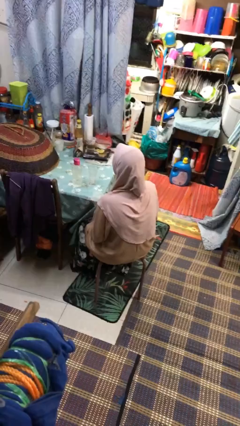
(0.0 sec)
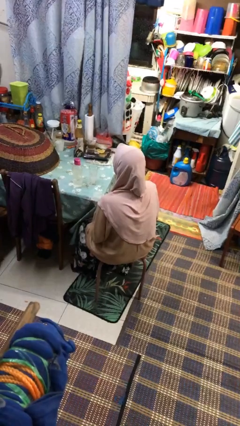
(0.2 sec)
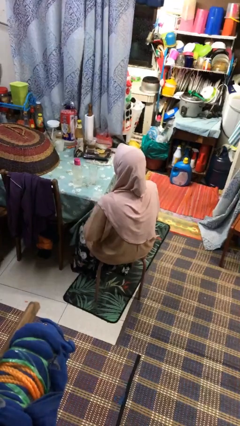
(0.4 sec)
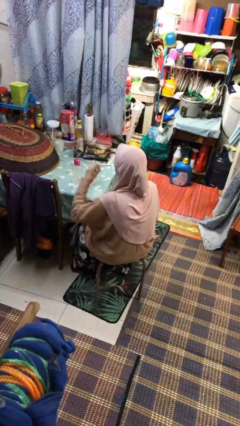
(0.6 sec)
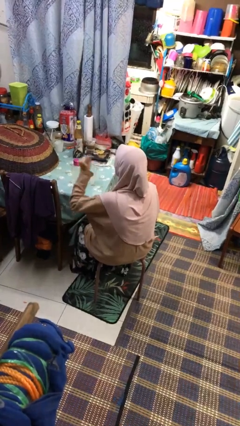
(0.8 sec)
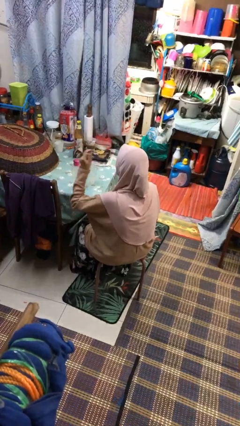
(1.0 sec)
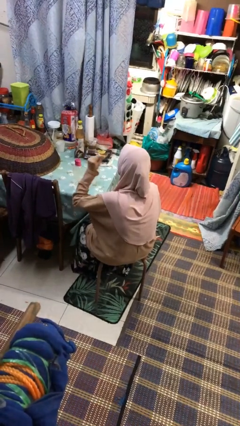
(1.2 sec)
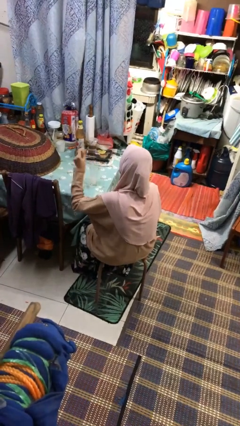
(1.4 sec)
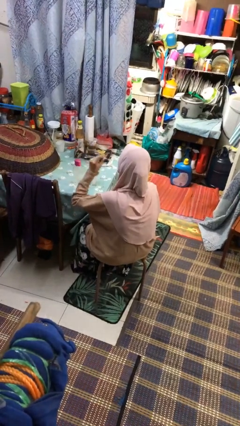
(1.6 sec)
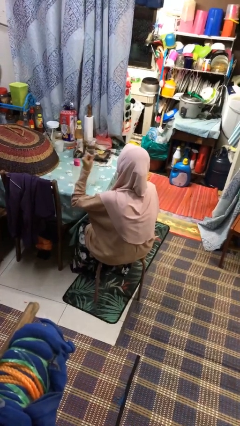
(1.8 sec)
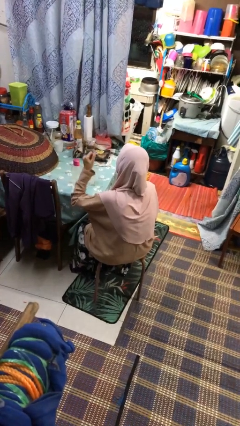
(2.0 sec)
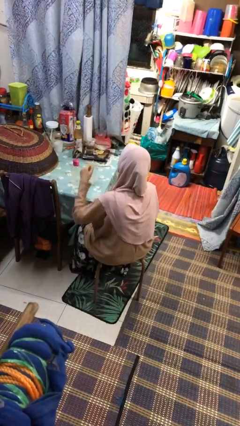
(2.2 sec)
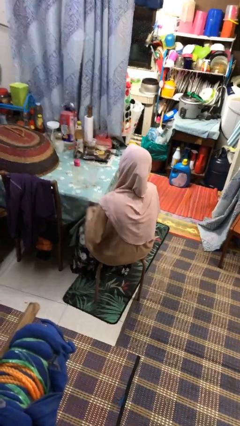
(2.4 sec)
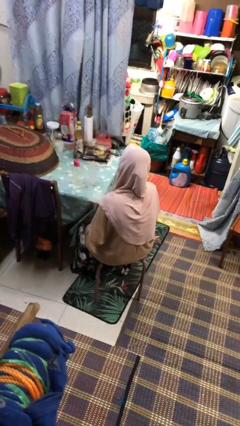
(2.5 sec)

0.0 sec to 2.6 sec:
person snaps fingers

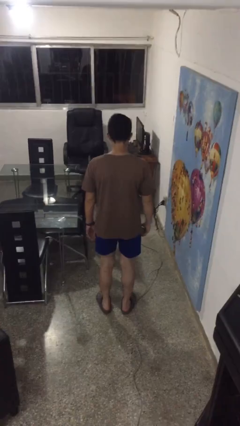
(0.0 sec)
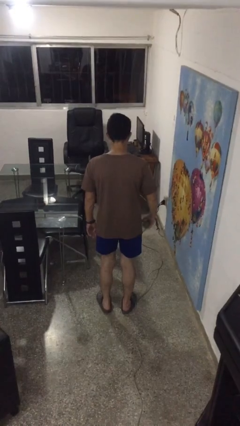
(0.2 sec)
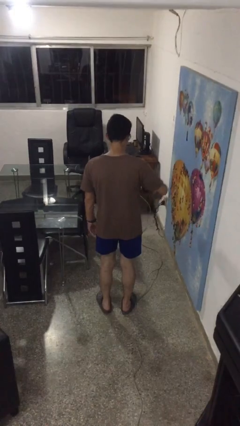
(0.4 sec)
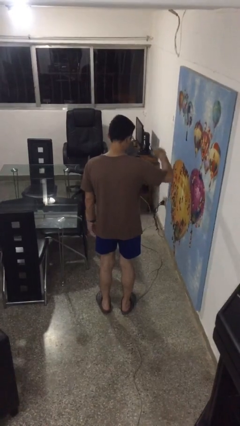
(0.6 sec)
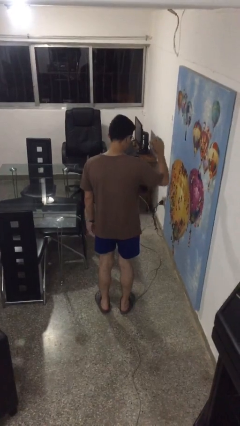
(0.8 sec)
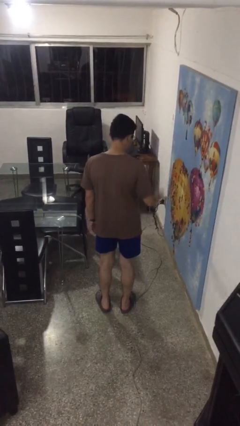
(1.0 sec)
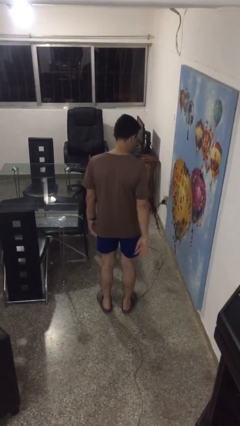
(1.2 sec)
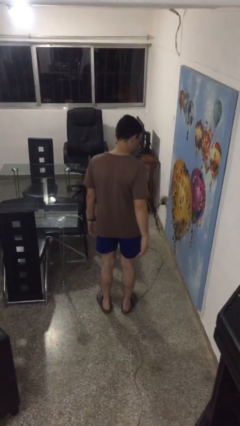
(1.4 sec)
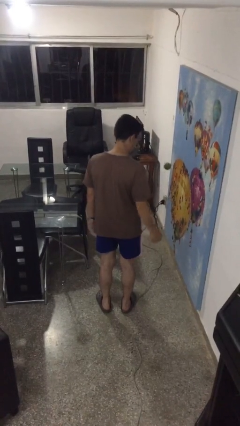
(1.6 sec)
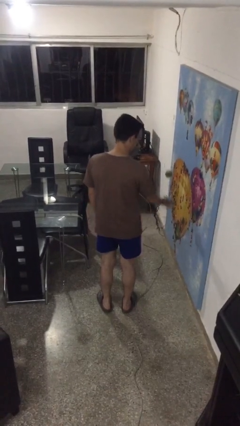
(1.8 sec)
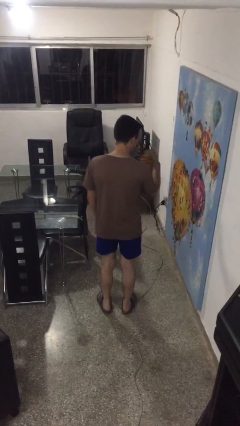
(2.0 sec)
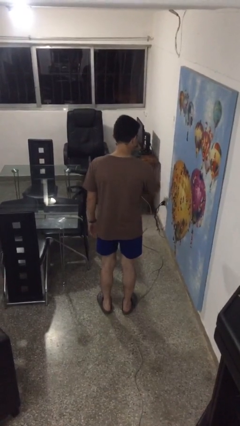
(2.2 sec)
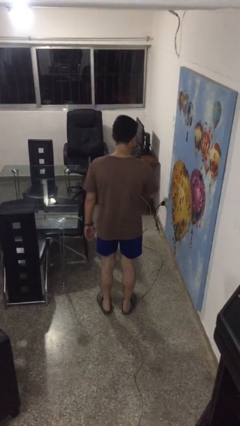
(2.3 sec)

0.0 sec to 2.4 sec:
person bounces ball on floor

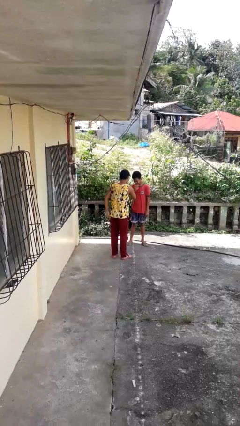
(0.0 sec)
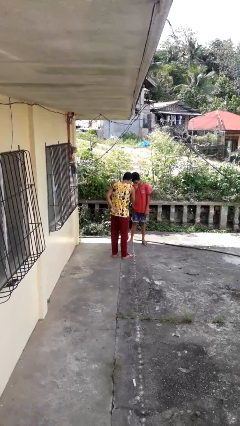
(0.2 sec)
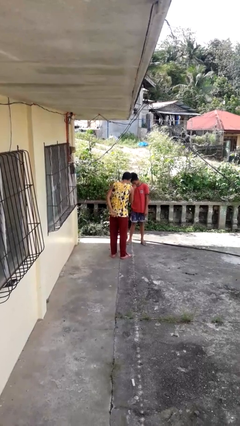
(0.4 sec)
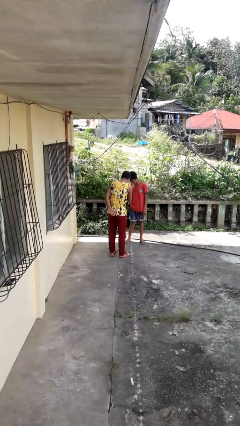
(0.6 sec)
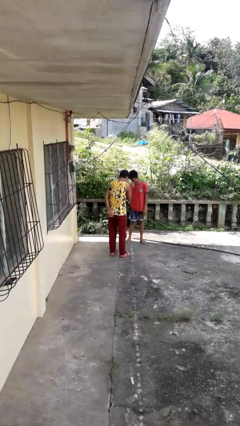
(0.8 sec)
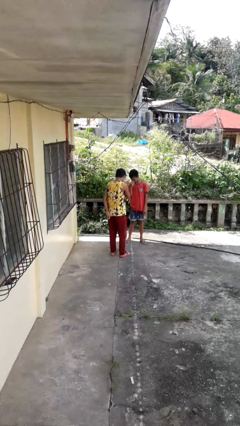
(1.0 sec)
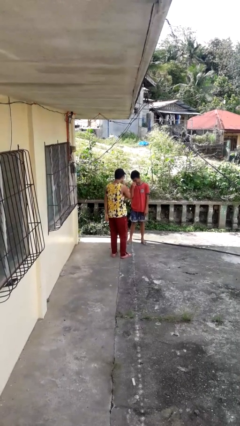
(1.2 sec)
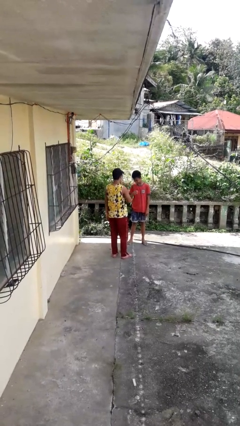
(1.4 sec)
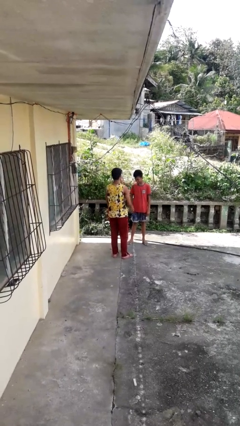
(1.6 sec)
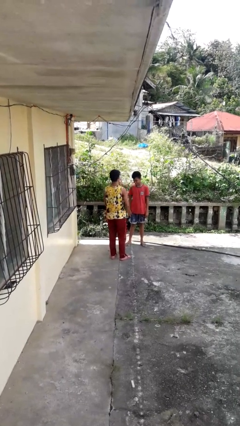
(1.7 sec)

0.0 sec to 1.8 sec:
person laughs with person

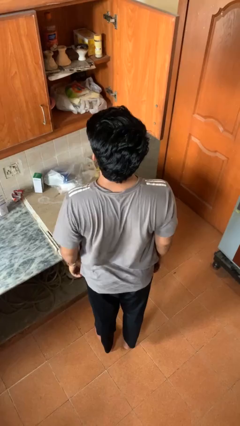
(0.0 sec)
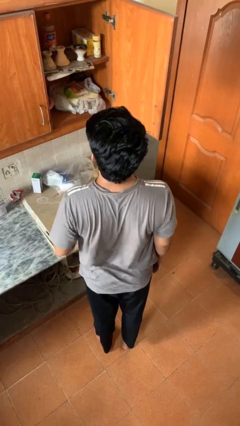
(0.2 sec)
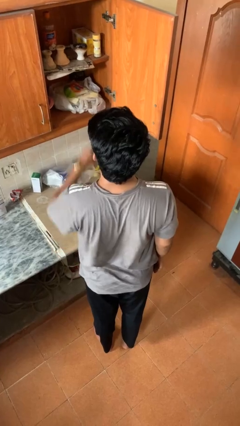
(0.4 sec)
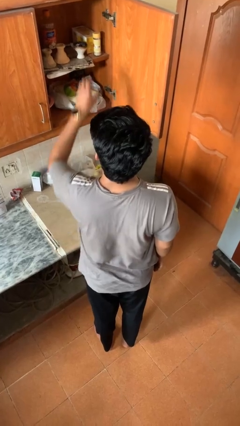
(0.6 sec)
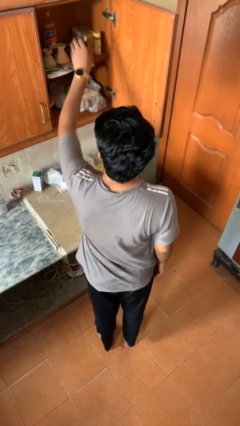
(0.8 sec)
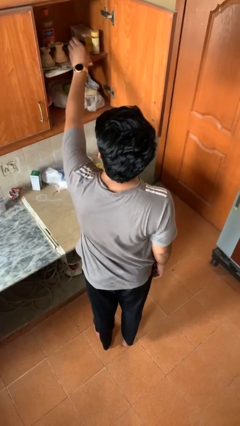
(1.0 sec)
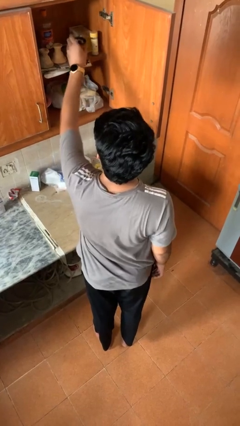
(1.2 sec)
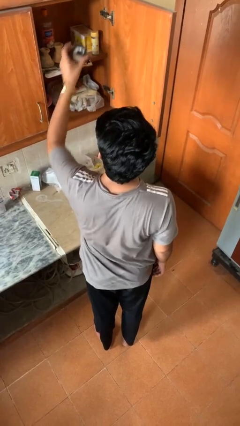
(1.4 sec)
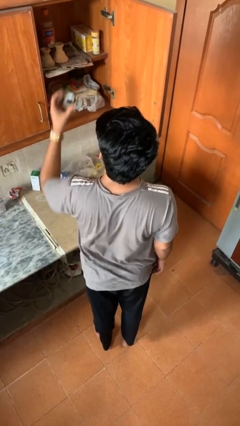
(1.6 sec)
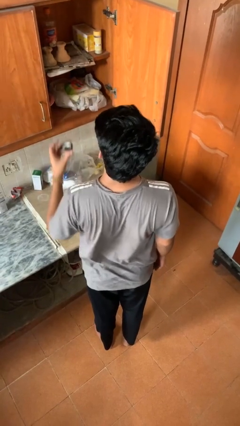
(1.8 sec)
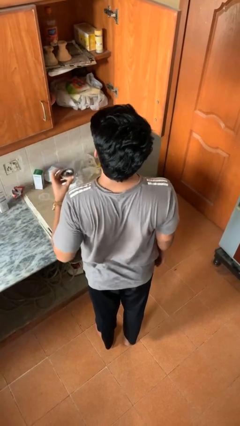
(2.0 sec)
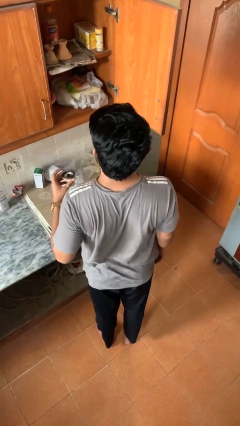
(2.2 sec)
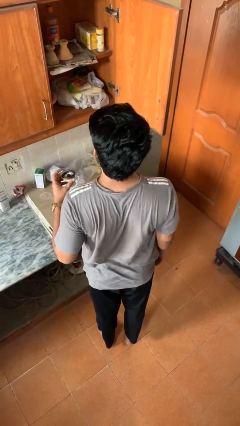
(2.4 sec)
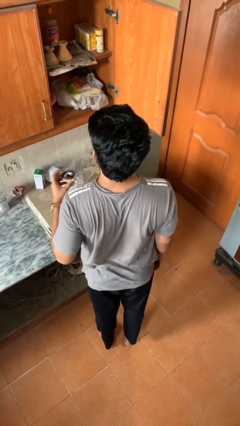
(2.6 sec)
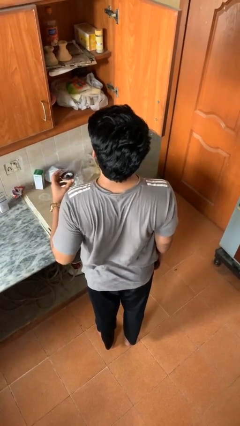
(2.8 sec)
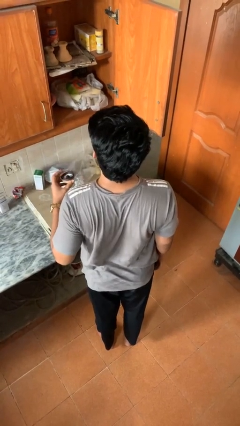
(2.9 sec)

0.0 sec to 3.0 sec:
person takes object from cabinet

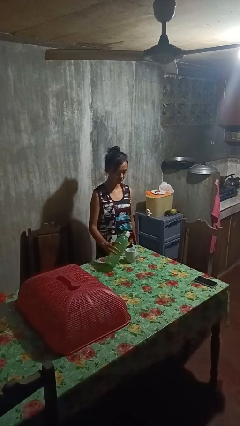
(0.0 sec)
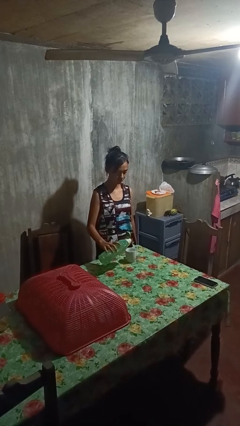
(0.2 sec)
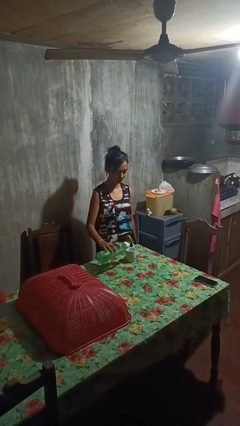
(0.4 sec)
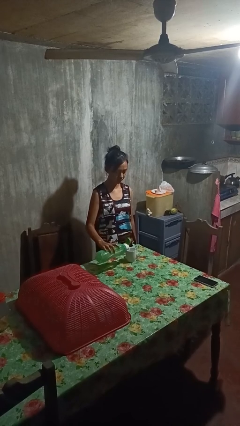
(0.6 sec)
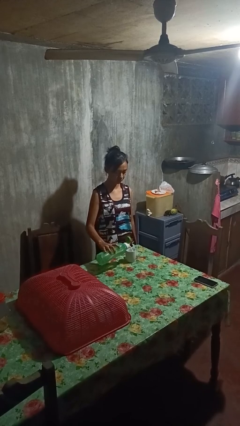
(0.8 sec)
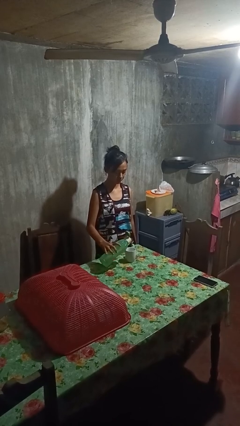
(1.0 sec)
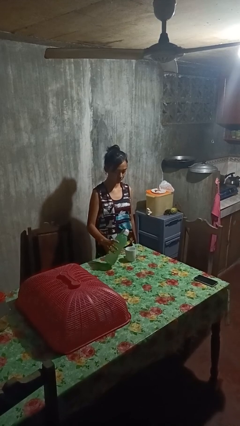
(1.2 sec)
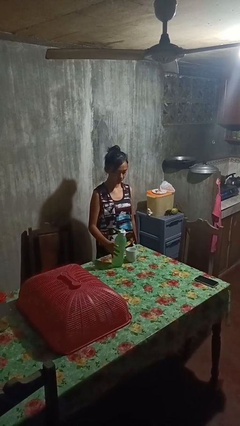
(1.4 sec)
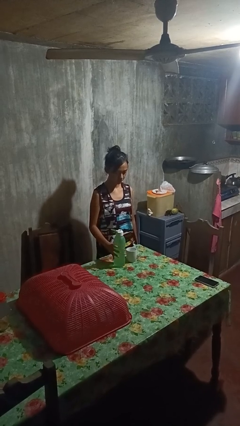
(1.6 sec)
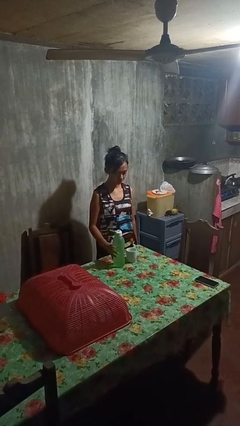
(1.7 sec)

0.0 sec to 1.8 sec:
person pours liquid into cup

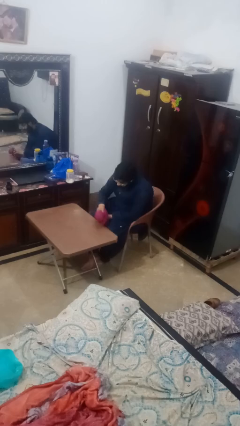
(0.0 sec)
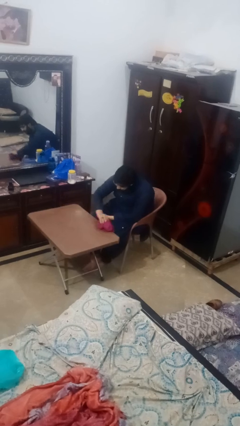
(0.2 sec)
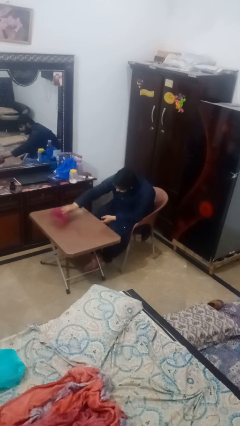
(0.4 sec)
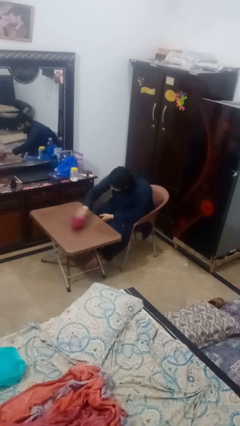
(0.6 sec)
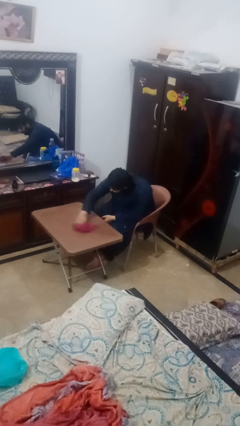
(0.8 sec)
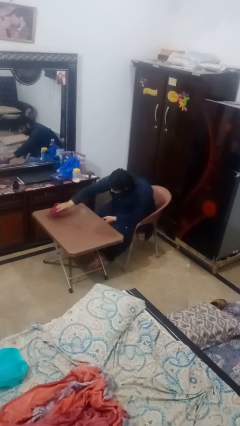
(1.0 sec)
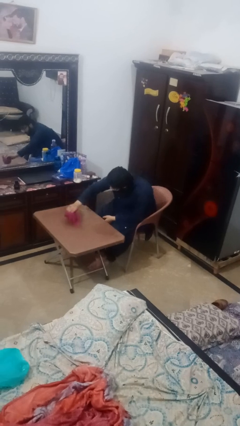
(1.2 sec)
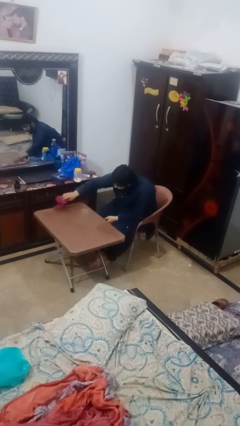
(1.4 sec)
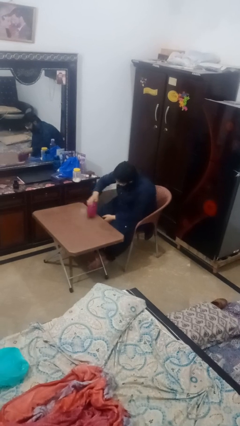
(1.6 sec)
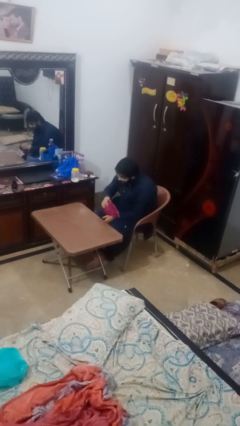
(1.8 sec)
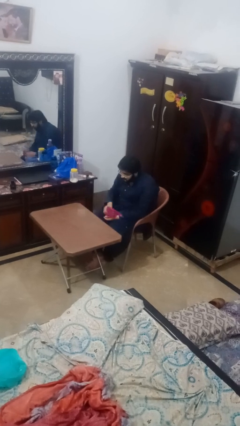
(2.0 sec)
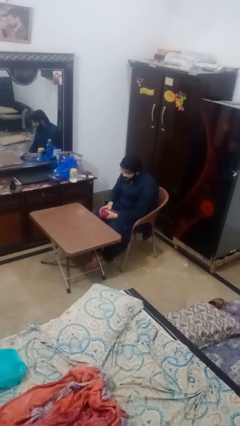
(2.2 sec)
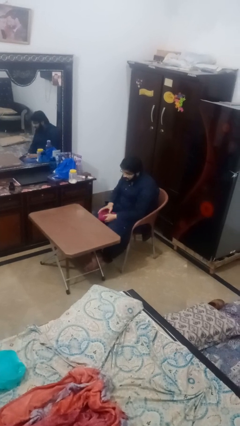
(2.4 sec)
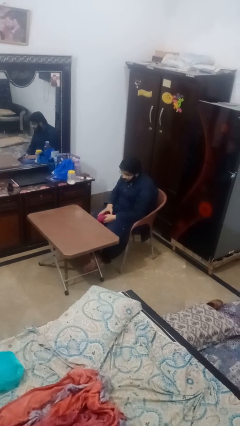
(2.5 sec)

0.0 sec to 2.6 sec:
person cleans table with rag

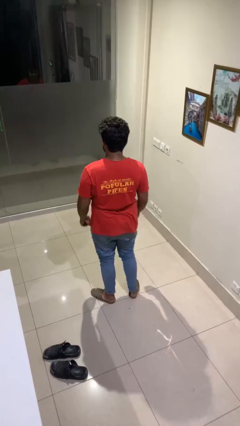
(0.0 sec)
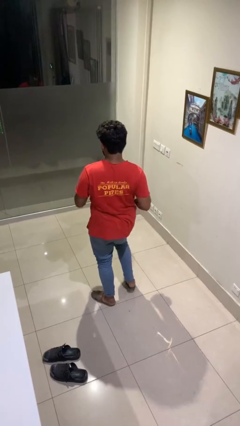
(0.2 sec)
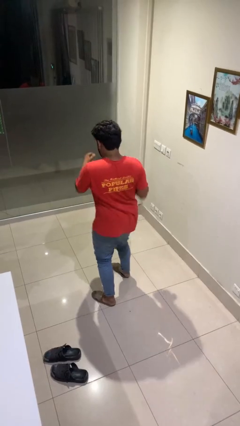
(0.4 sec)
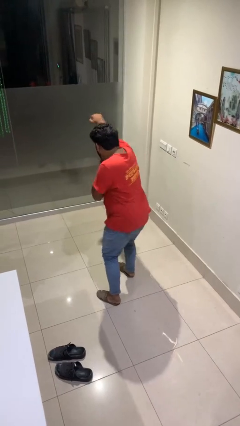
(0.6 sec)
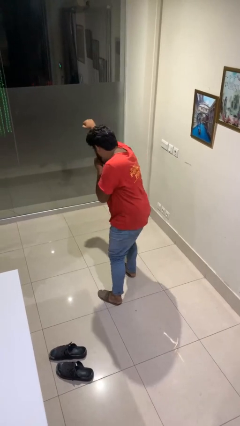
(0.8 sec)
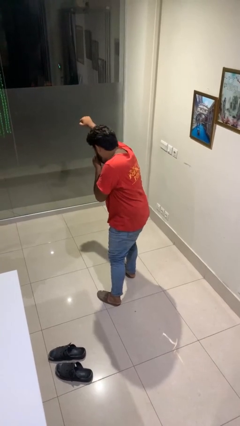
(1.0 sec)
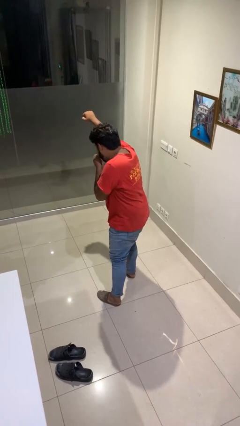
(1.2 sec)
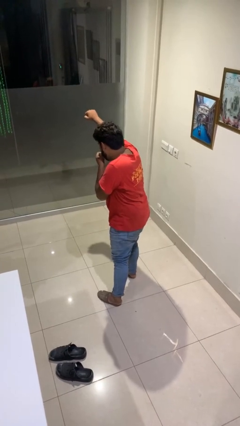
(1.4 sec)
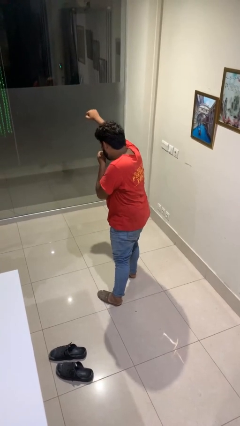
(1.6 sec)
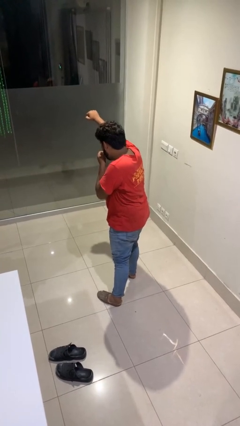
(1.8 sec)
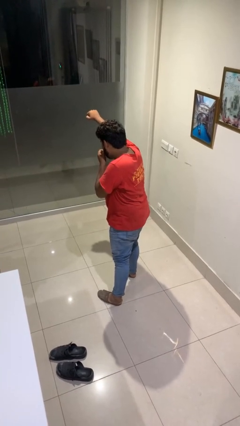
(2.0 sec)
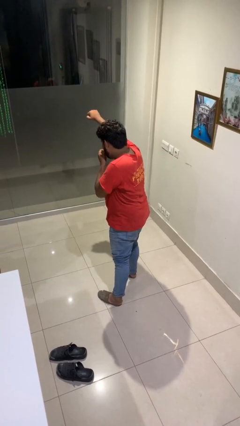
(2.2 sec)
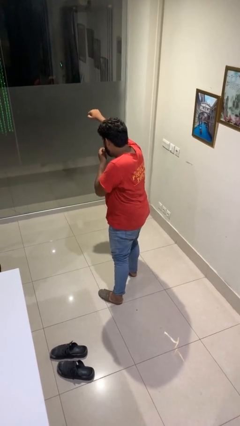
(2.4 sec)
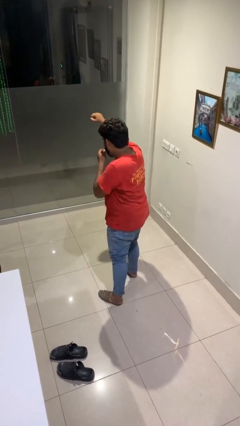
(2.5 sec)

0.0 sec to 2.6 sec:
person punches

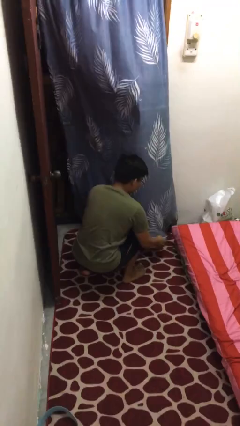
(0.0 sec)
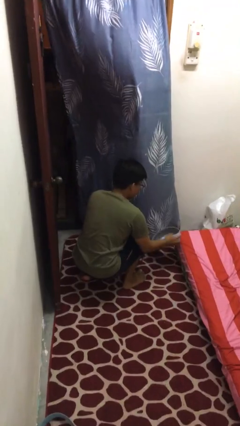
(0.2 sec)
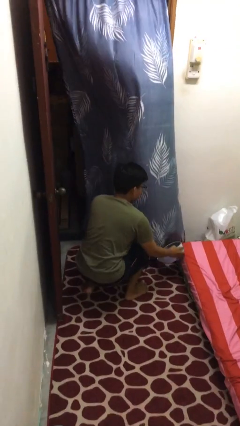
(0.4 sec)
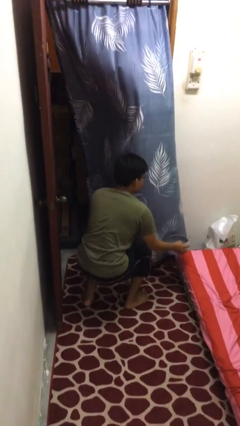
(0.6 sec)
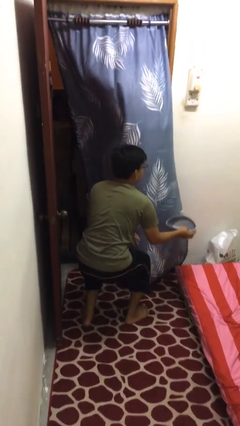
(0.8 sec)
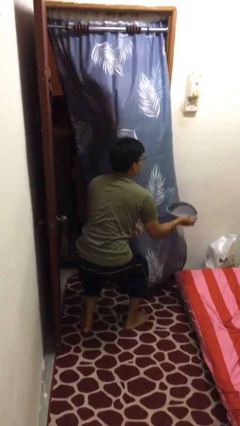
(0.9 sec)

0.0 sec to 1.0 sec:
person picks up object from floor
